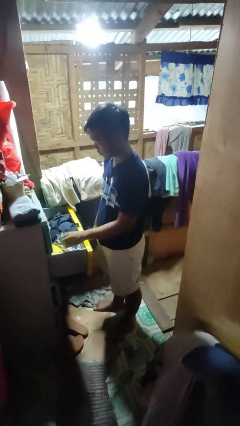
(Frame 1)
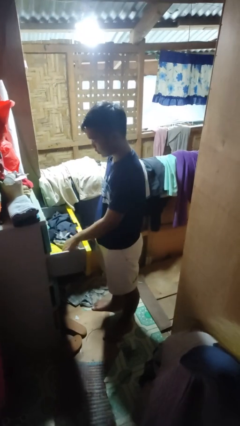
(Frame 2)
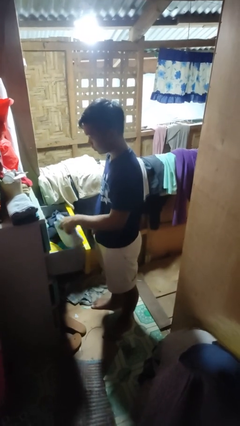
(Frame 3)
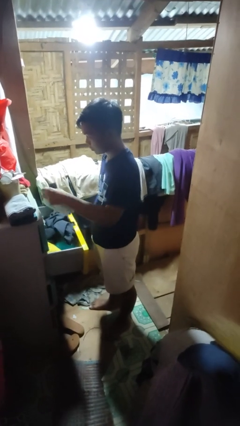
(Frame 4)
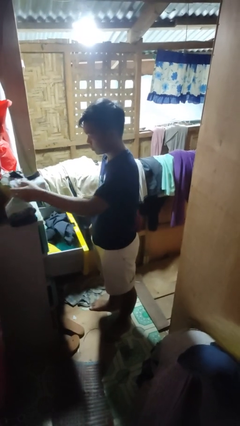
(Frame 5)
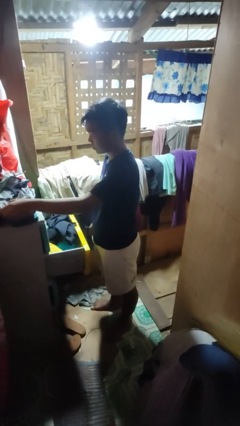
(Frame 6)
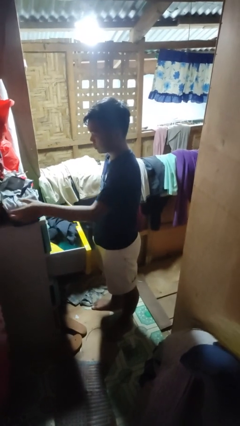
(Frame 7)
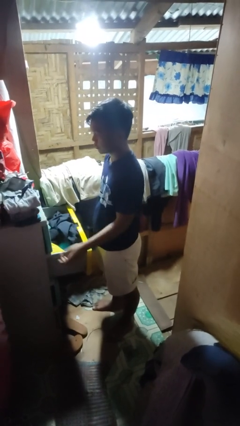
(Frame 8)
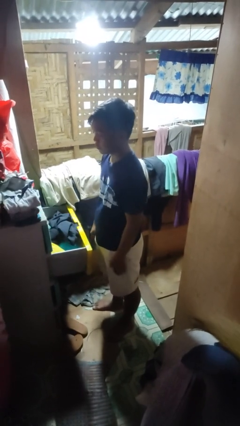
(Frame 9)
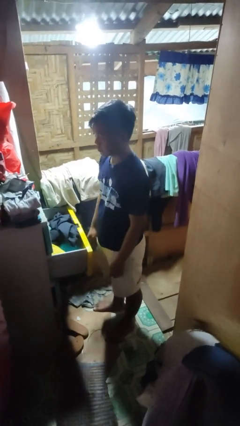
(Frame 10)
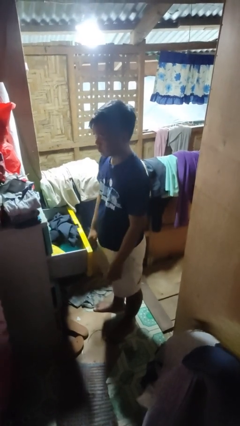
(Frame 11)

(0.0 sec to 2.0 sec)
person takes clothes from dresser

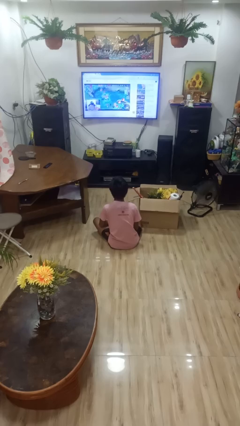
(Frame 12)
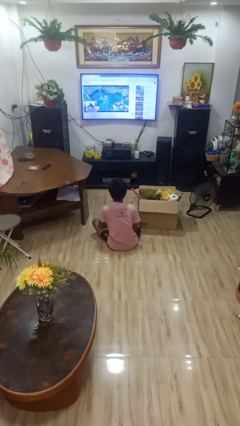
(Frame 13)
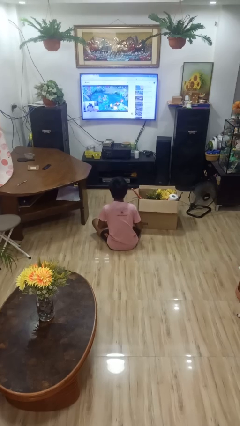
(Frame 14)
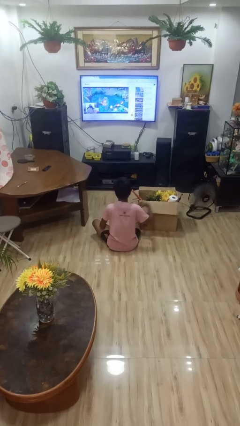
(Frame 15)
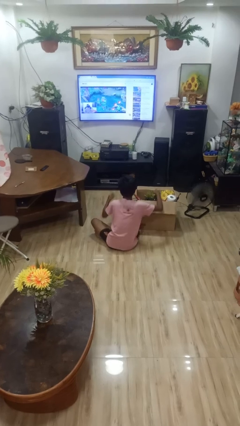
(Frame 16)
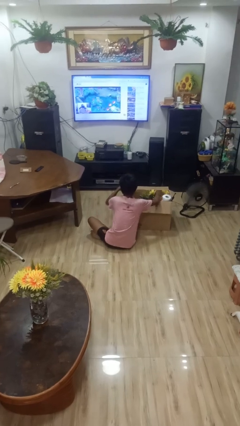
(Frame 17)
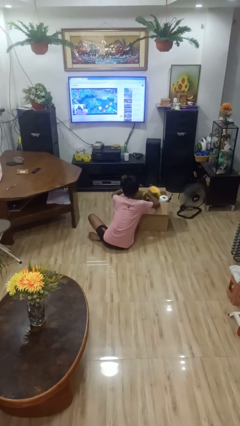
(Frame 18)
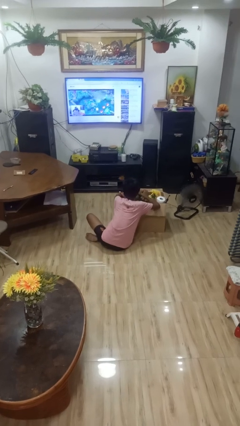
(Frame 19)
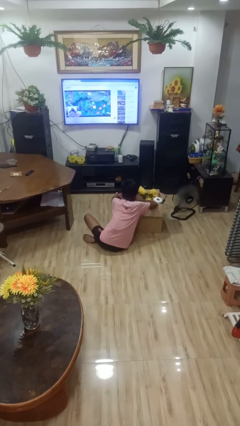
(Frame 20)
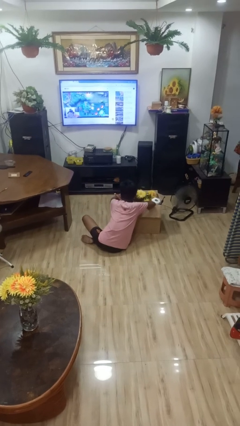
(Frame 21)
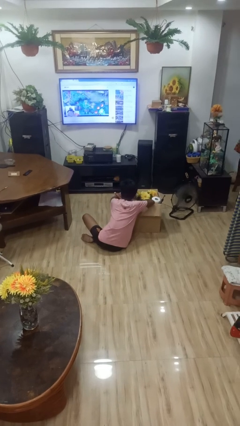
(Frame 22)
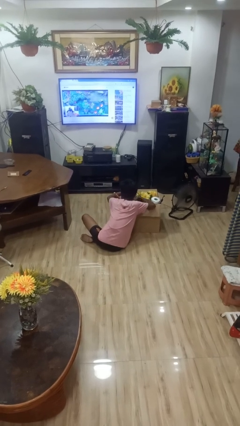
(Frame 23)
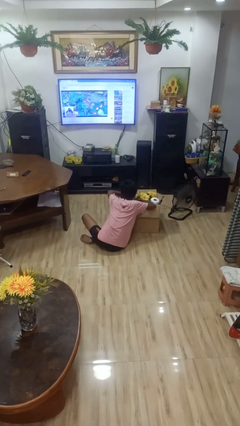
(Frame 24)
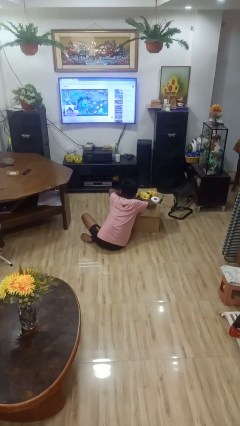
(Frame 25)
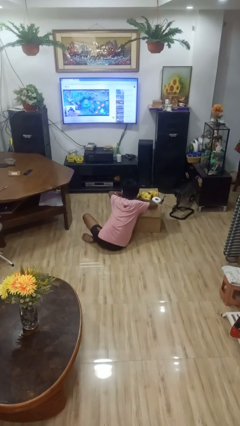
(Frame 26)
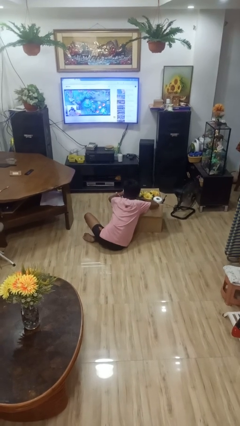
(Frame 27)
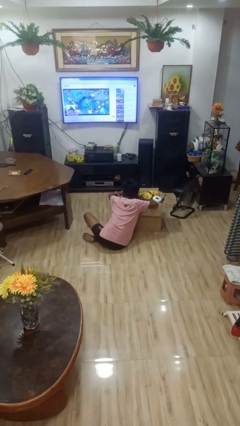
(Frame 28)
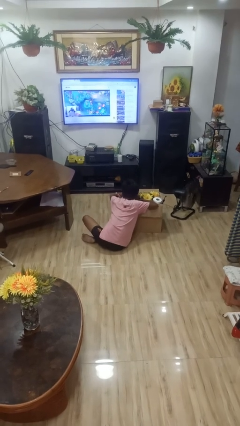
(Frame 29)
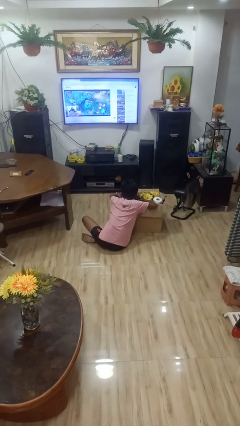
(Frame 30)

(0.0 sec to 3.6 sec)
person searches in box

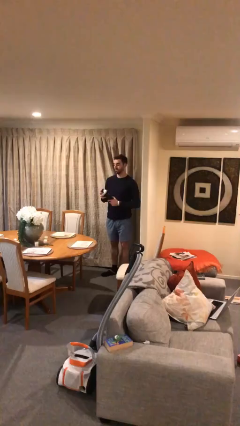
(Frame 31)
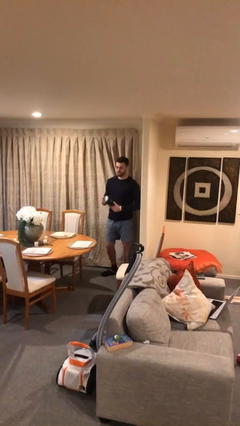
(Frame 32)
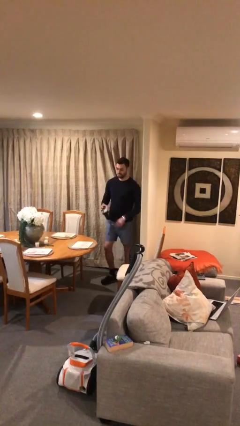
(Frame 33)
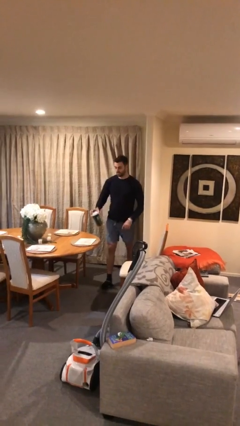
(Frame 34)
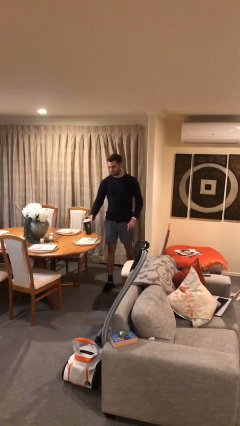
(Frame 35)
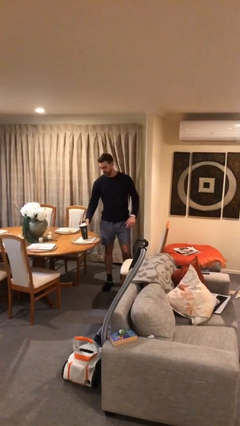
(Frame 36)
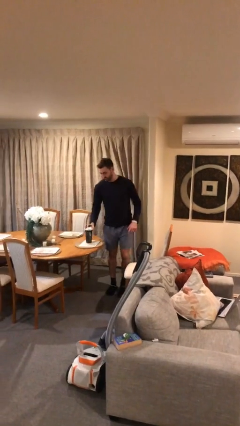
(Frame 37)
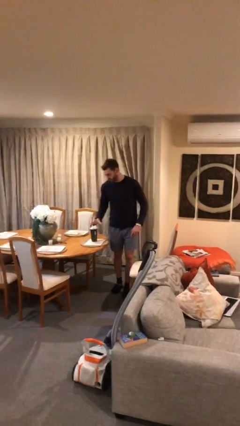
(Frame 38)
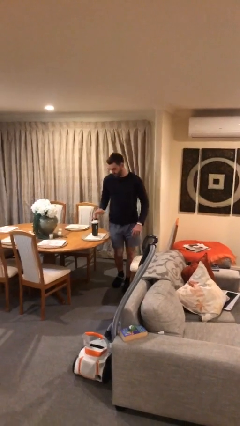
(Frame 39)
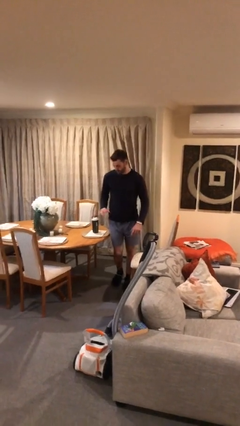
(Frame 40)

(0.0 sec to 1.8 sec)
person puts down object on table

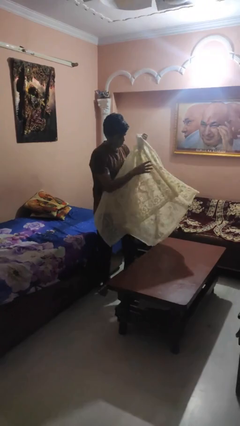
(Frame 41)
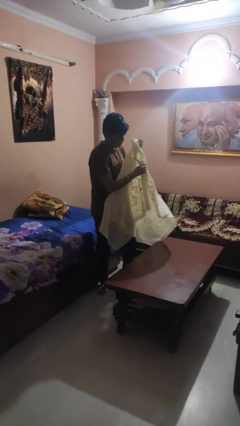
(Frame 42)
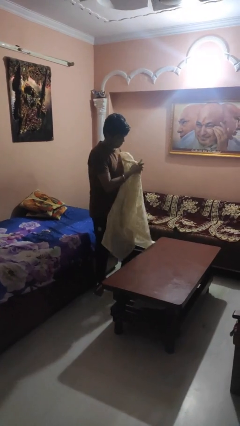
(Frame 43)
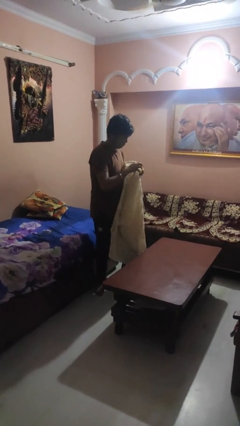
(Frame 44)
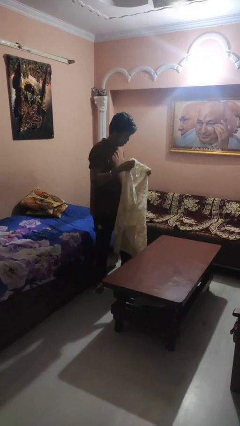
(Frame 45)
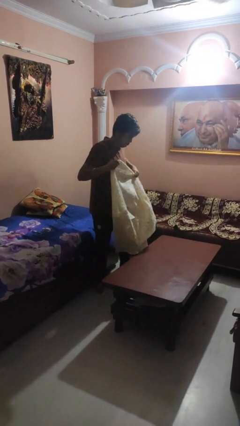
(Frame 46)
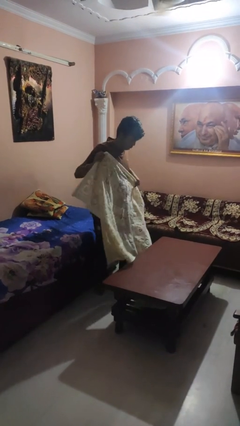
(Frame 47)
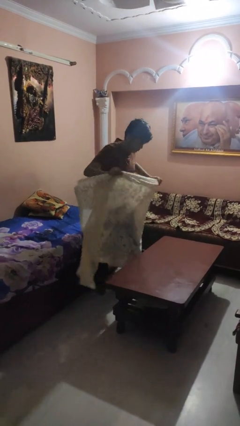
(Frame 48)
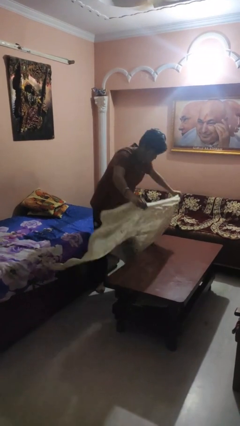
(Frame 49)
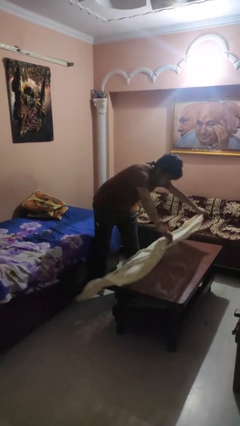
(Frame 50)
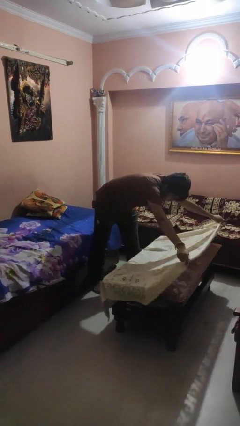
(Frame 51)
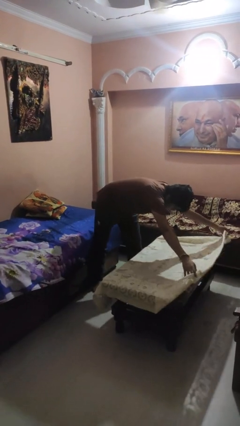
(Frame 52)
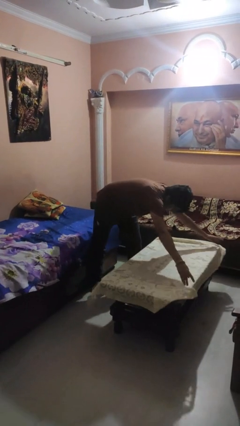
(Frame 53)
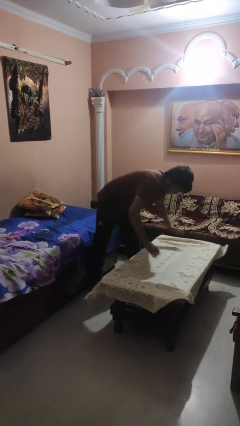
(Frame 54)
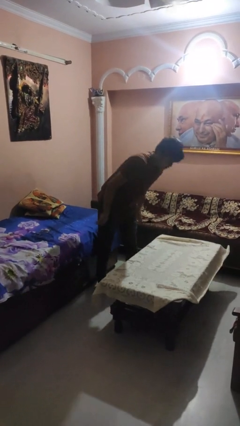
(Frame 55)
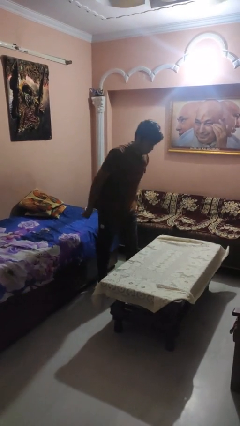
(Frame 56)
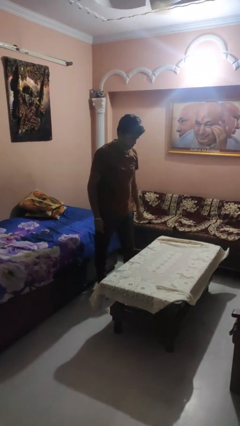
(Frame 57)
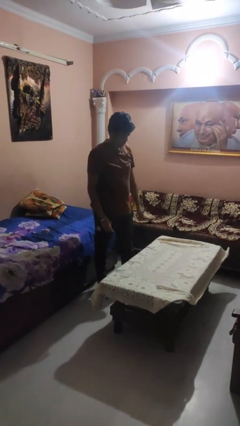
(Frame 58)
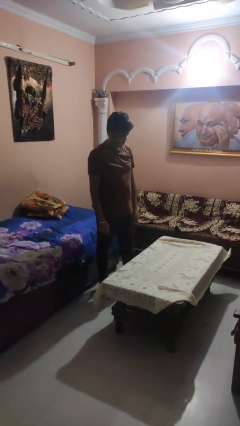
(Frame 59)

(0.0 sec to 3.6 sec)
person spreads tablecloth

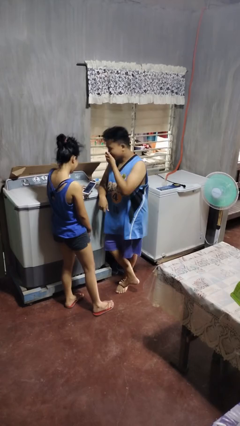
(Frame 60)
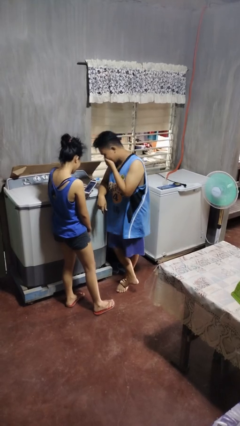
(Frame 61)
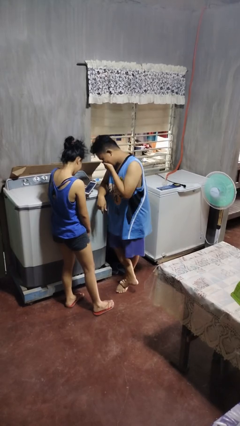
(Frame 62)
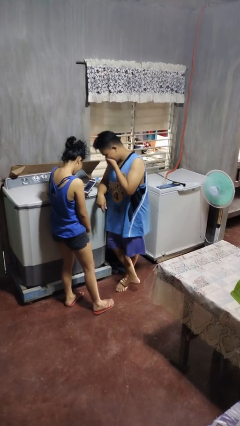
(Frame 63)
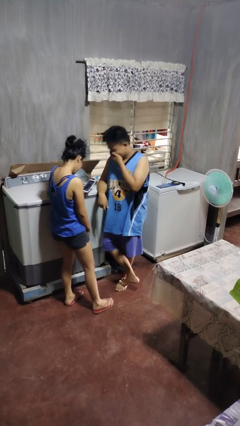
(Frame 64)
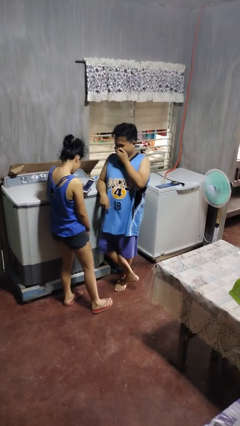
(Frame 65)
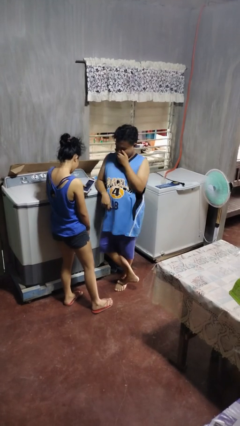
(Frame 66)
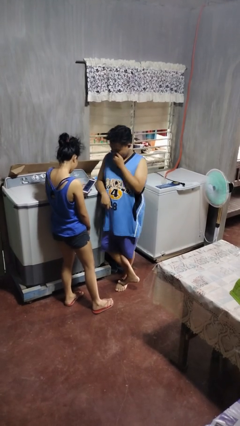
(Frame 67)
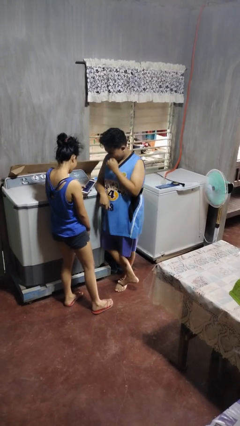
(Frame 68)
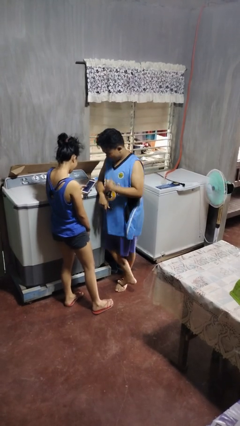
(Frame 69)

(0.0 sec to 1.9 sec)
person laughs with person

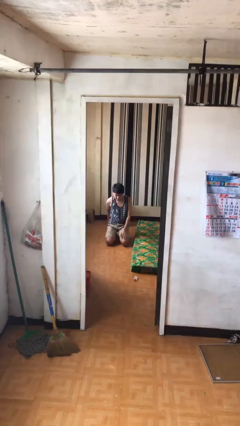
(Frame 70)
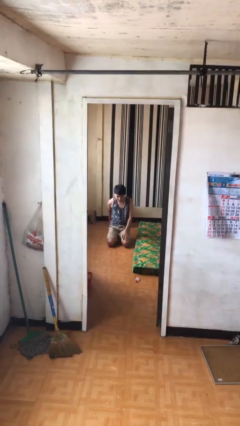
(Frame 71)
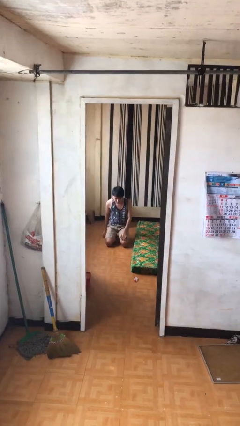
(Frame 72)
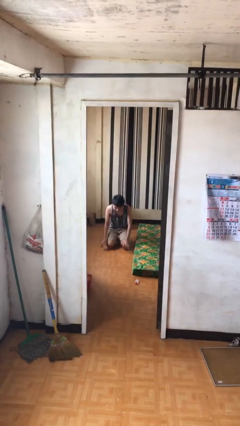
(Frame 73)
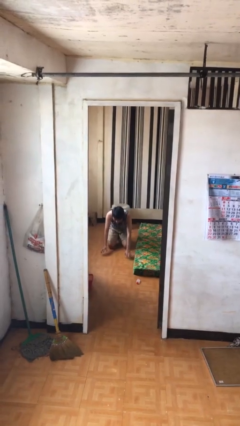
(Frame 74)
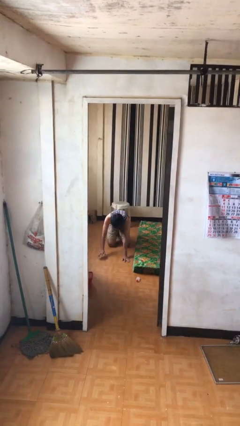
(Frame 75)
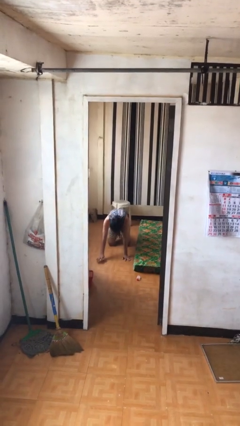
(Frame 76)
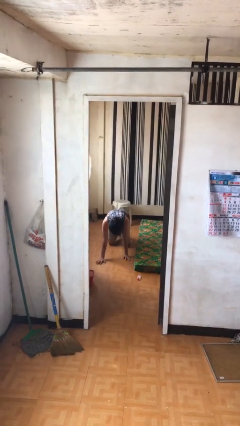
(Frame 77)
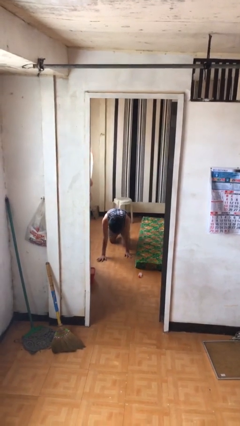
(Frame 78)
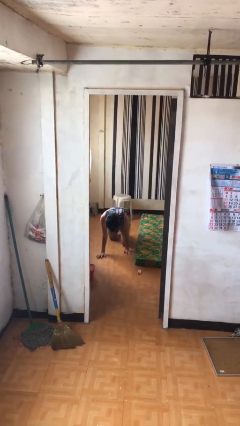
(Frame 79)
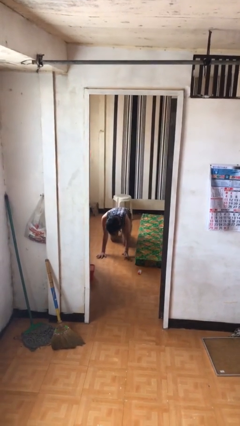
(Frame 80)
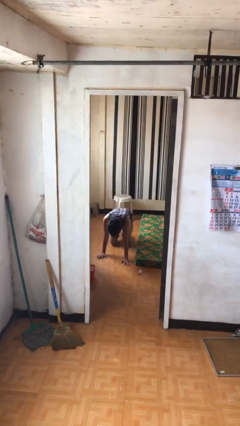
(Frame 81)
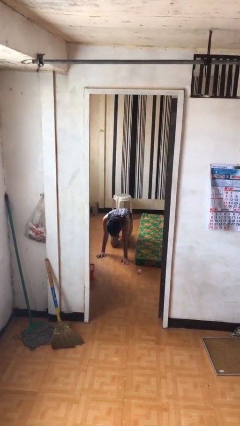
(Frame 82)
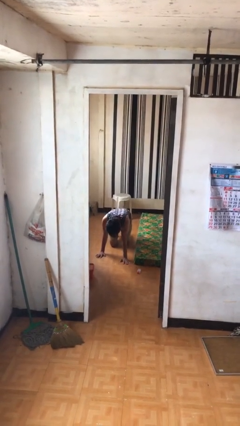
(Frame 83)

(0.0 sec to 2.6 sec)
person crawls

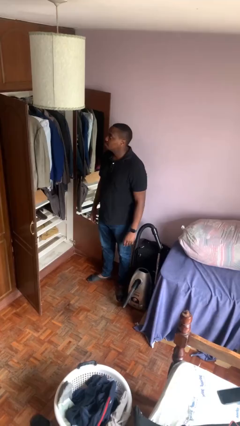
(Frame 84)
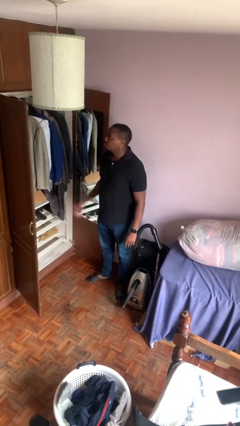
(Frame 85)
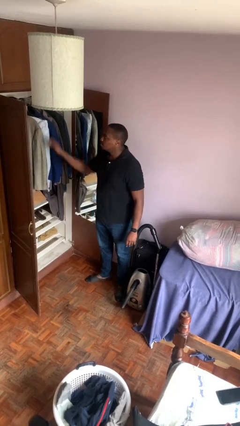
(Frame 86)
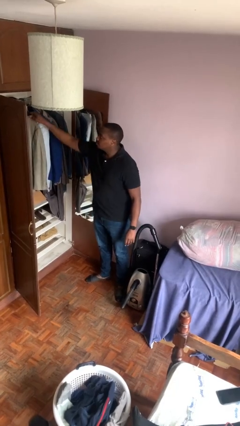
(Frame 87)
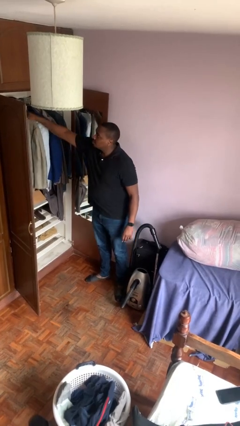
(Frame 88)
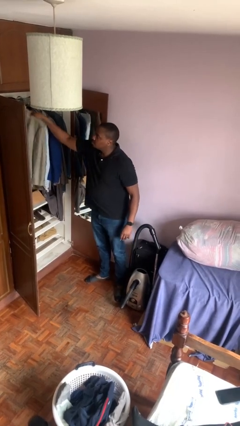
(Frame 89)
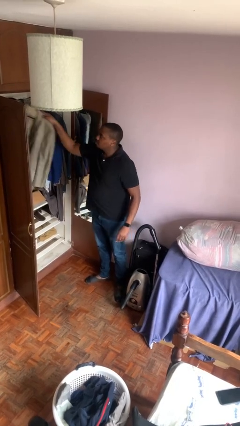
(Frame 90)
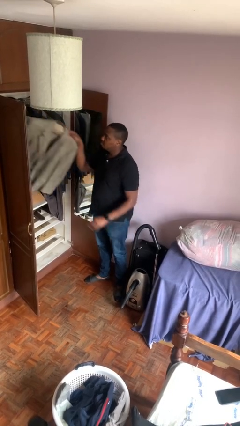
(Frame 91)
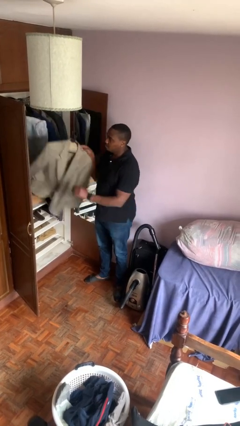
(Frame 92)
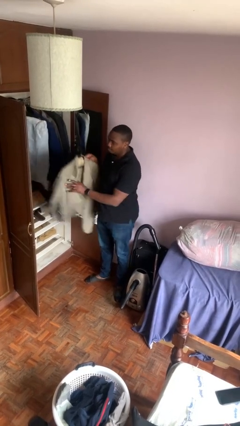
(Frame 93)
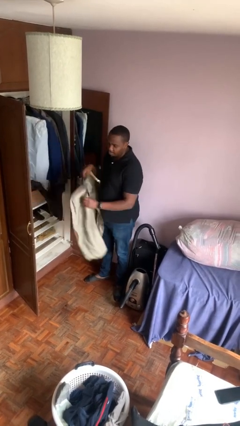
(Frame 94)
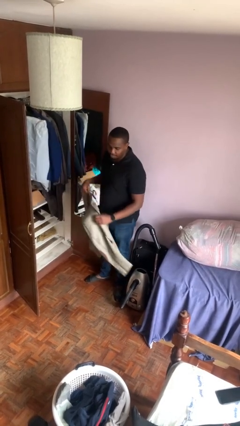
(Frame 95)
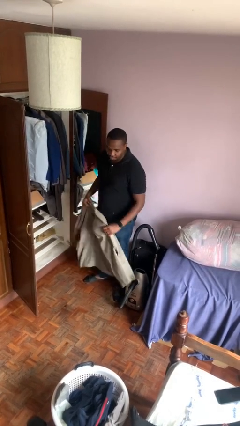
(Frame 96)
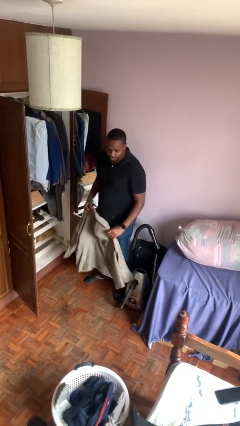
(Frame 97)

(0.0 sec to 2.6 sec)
person takes clothes from closet
